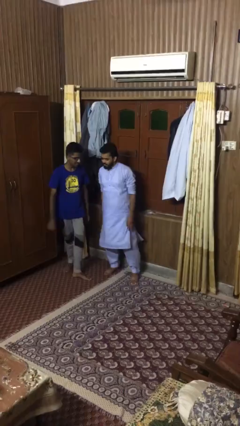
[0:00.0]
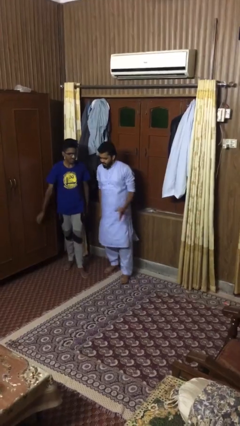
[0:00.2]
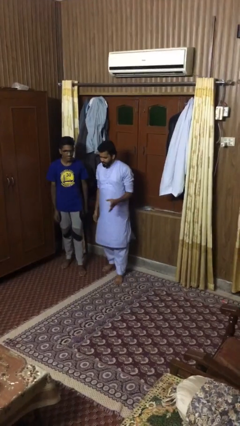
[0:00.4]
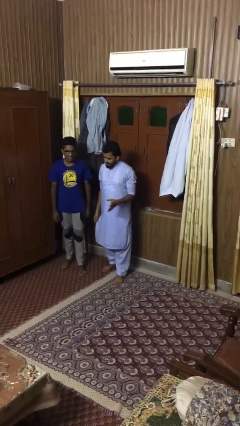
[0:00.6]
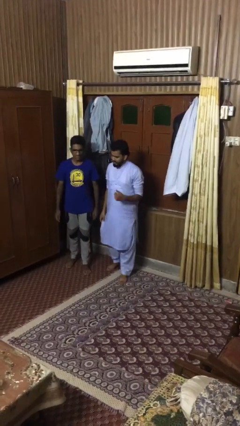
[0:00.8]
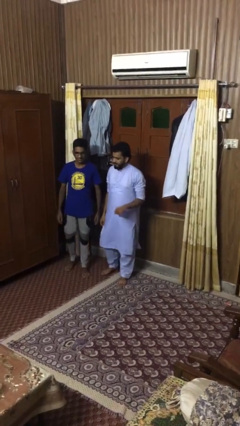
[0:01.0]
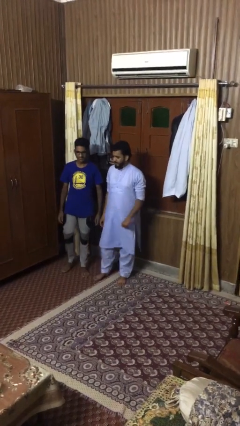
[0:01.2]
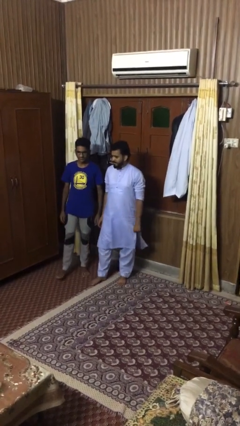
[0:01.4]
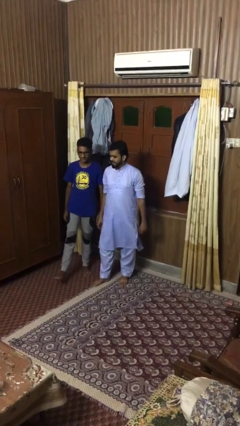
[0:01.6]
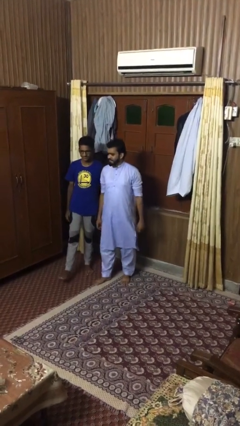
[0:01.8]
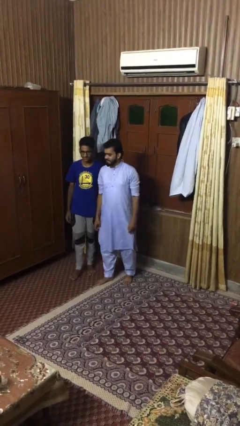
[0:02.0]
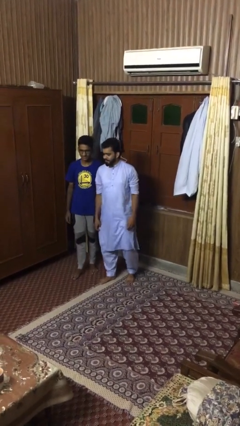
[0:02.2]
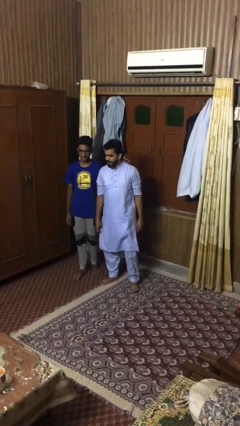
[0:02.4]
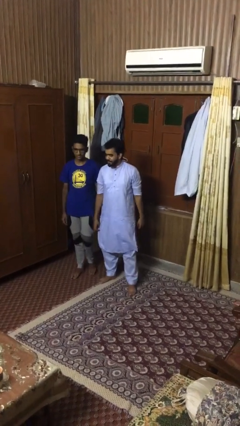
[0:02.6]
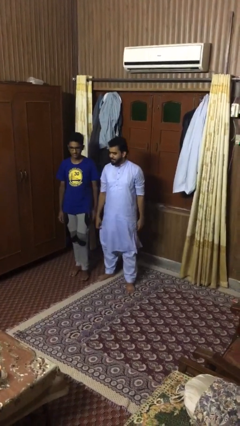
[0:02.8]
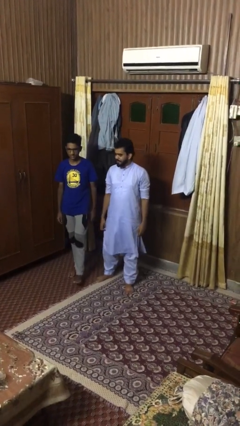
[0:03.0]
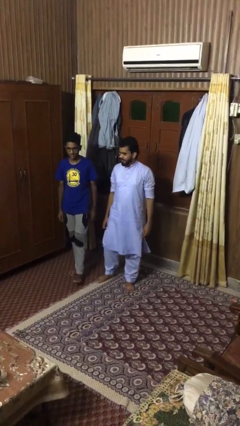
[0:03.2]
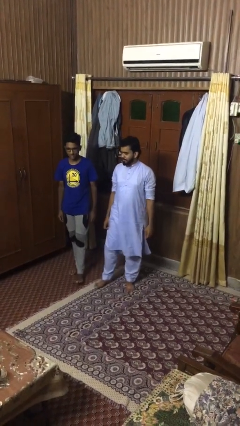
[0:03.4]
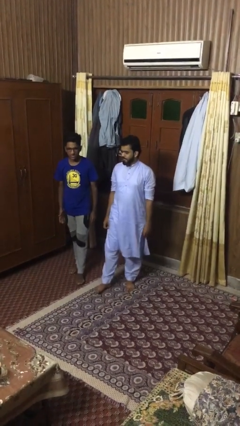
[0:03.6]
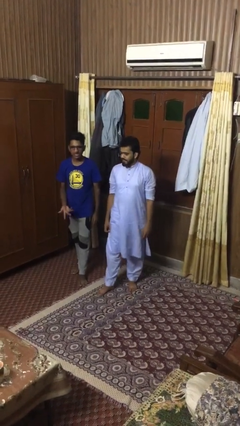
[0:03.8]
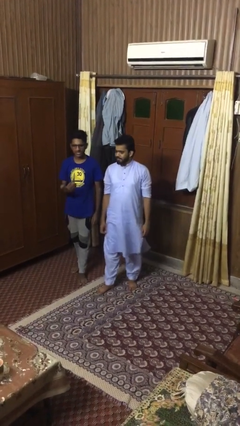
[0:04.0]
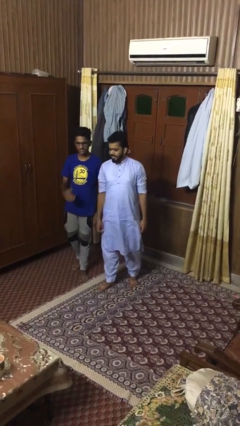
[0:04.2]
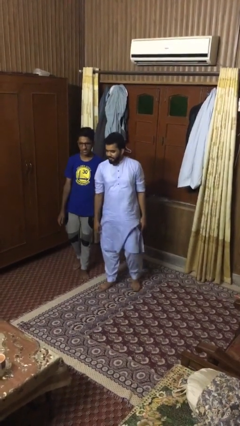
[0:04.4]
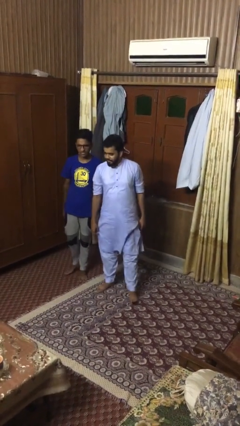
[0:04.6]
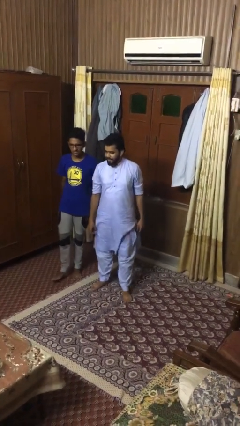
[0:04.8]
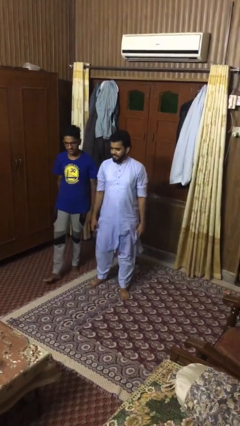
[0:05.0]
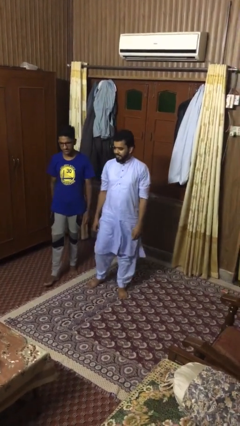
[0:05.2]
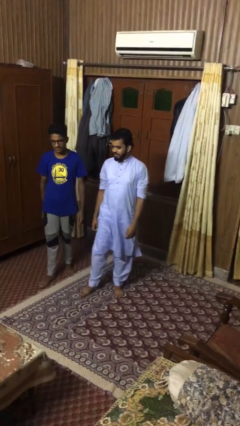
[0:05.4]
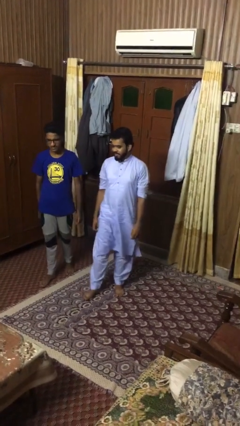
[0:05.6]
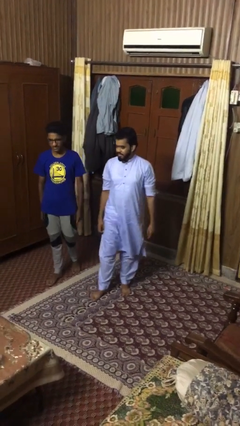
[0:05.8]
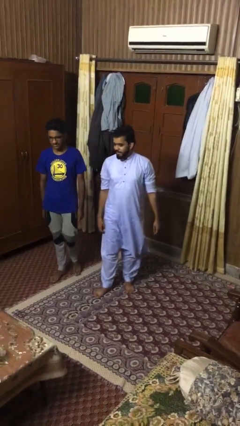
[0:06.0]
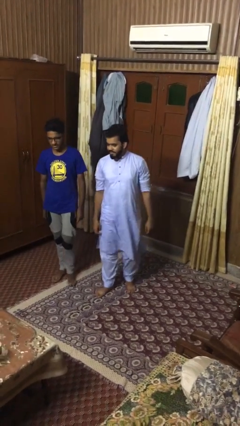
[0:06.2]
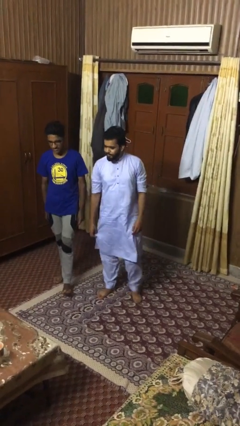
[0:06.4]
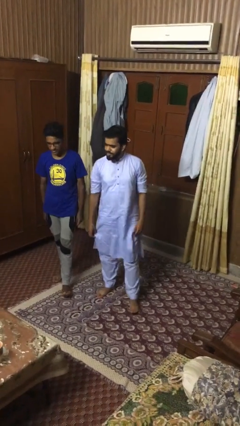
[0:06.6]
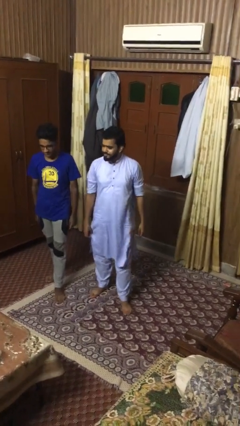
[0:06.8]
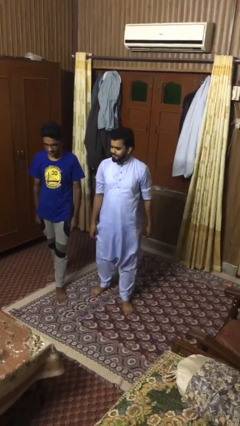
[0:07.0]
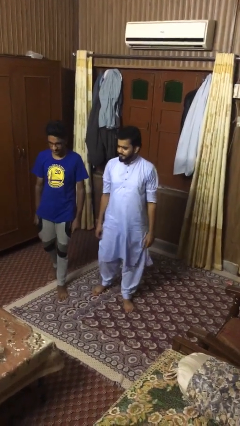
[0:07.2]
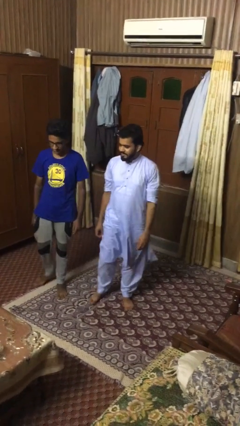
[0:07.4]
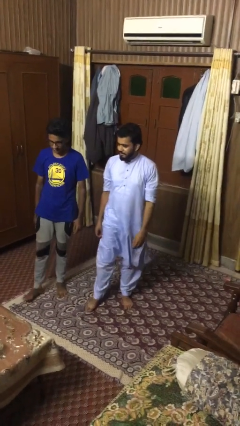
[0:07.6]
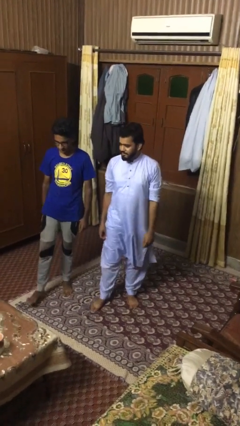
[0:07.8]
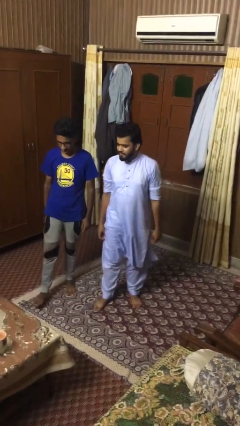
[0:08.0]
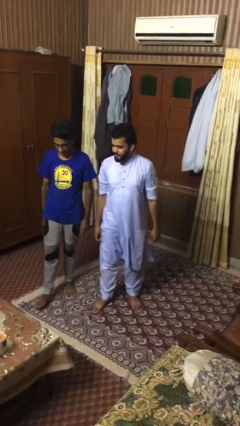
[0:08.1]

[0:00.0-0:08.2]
person talks to person

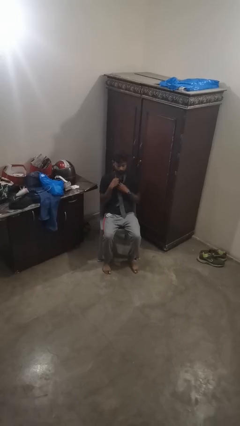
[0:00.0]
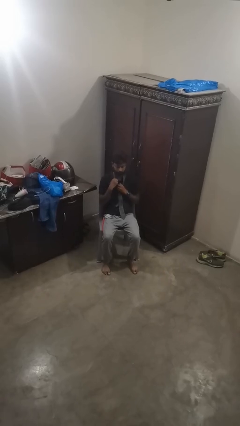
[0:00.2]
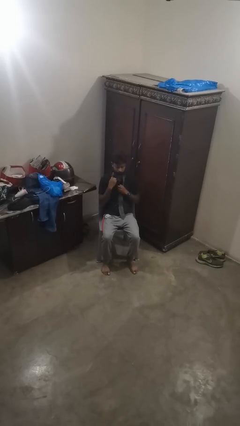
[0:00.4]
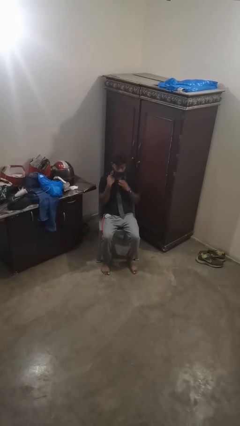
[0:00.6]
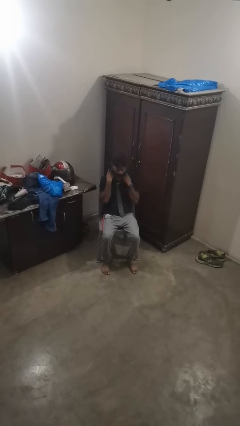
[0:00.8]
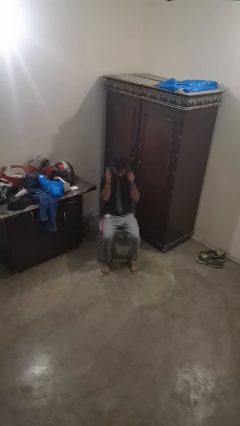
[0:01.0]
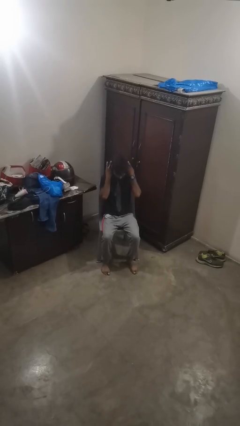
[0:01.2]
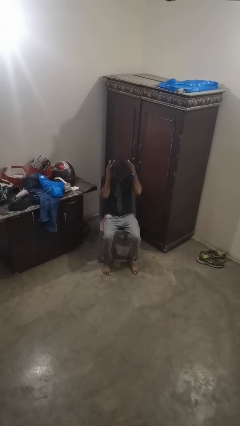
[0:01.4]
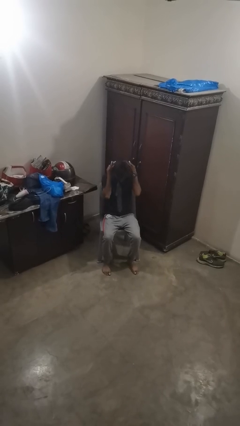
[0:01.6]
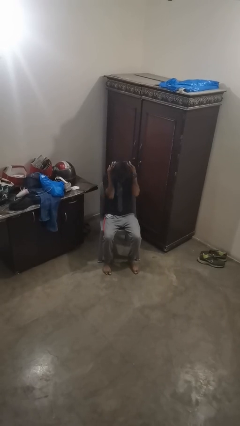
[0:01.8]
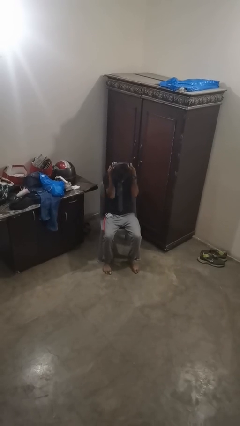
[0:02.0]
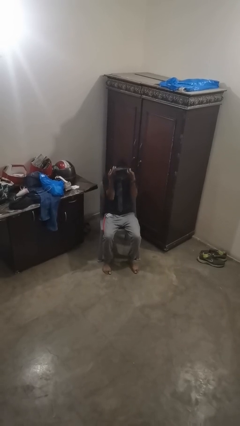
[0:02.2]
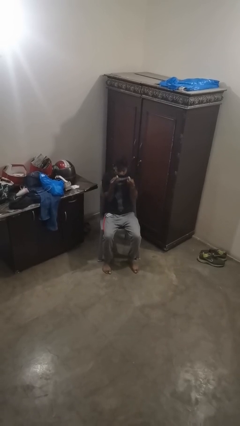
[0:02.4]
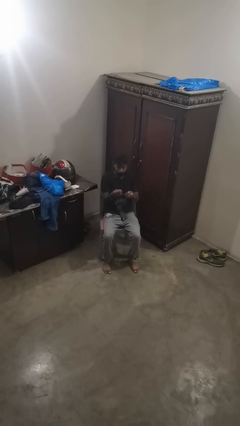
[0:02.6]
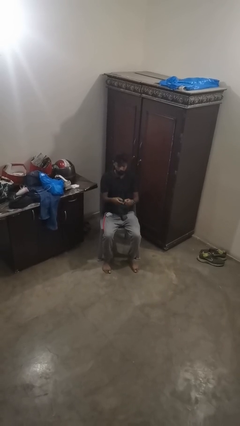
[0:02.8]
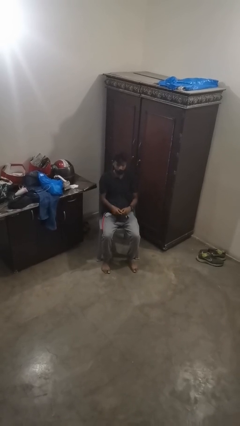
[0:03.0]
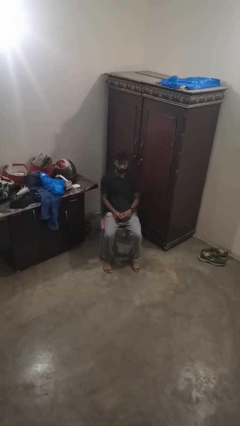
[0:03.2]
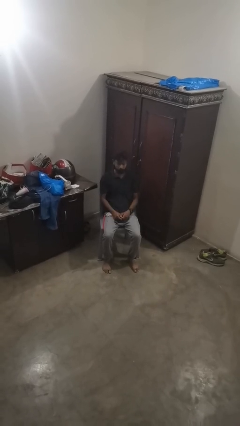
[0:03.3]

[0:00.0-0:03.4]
person takes off necktie

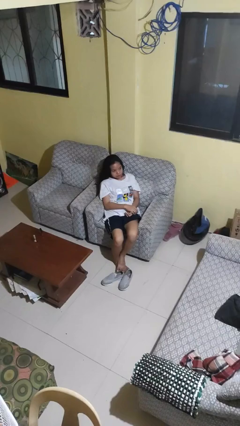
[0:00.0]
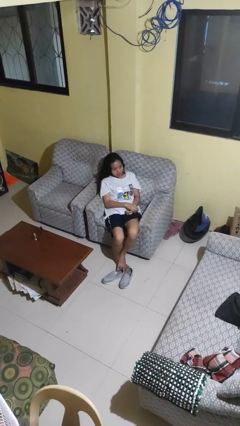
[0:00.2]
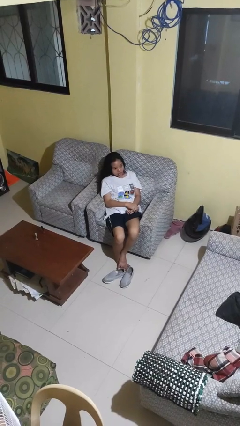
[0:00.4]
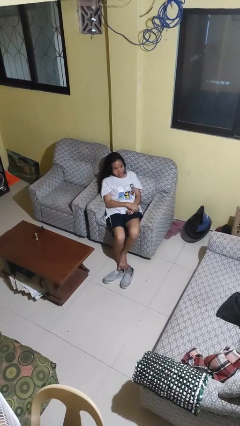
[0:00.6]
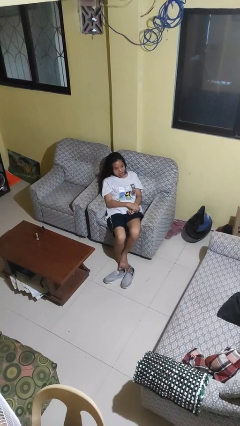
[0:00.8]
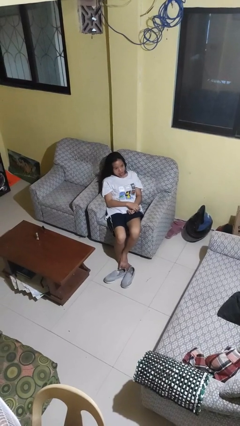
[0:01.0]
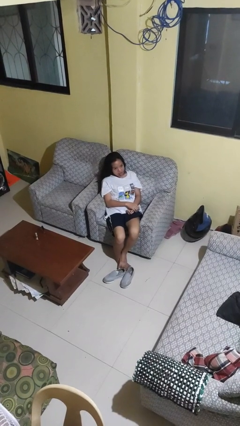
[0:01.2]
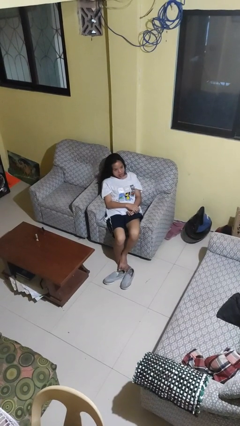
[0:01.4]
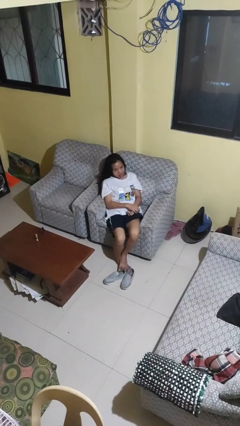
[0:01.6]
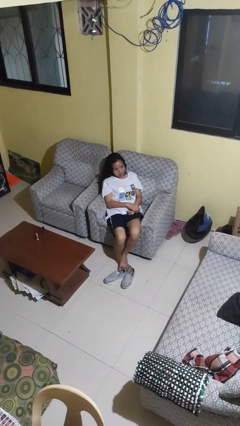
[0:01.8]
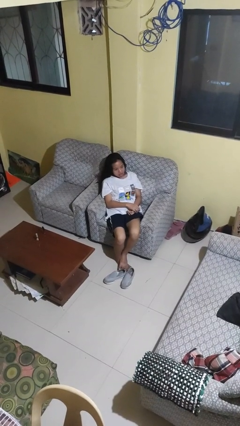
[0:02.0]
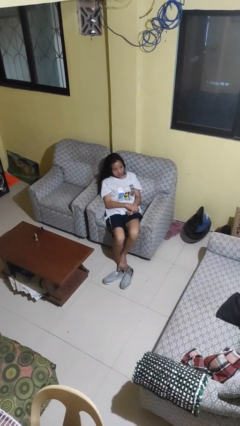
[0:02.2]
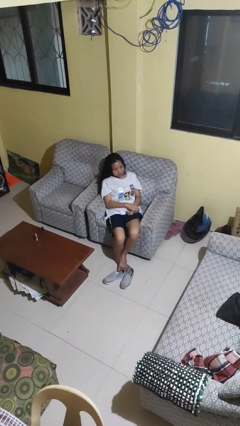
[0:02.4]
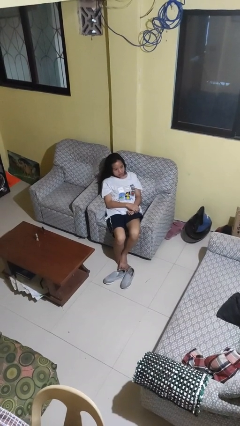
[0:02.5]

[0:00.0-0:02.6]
person sticks out tongue

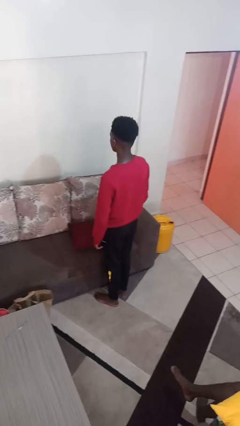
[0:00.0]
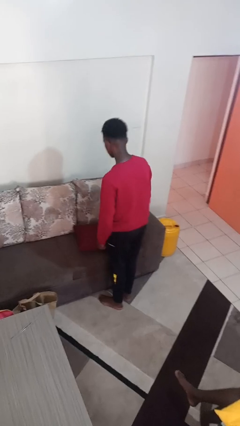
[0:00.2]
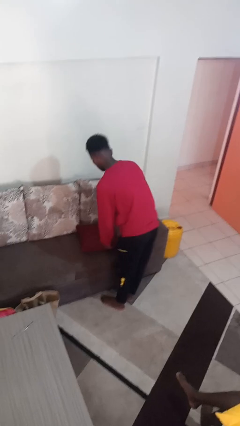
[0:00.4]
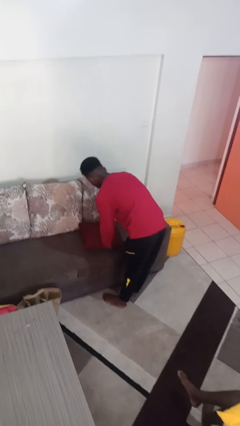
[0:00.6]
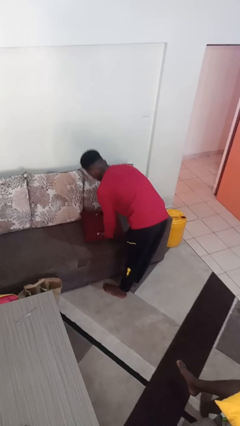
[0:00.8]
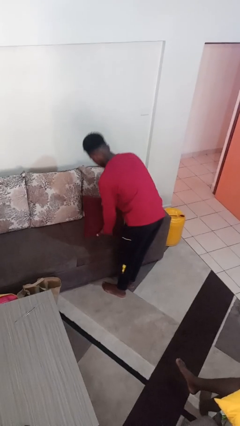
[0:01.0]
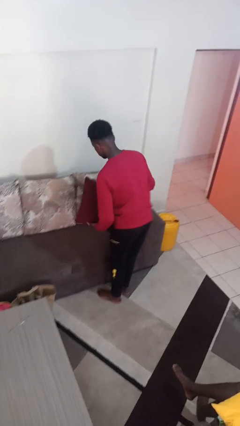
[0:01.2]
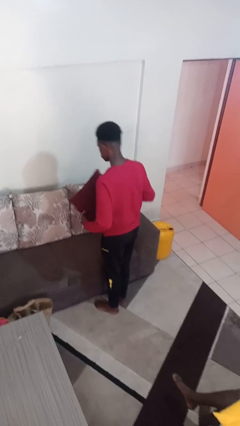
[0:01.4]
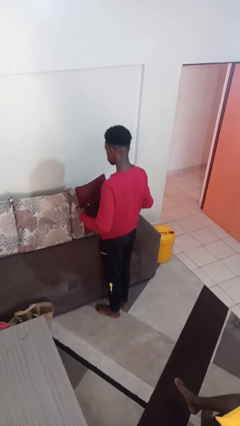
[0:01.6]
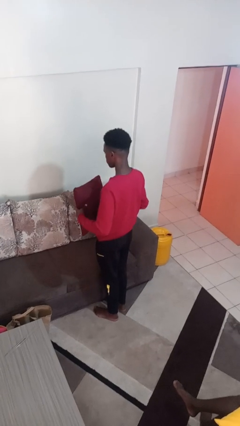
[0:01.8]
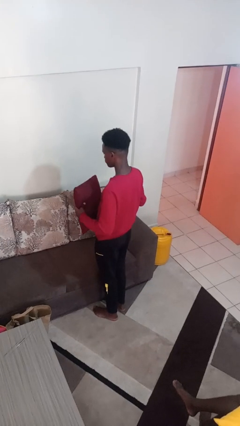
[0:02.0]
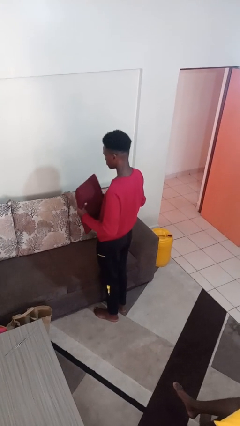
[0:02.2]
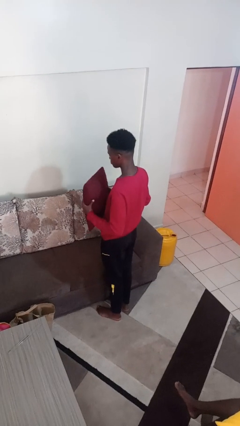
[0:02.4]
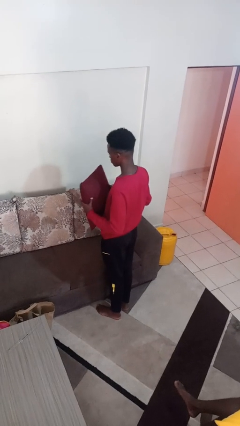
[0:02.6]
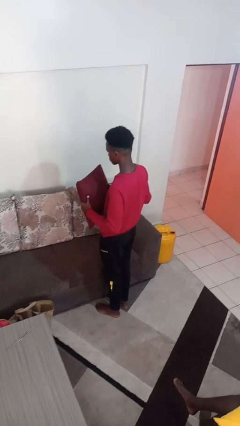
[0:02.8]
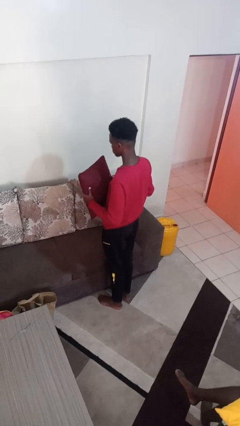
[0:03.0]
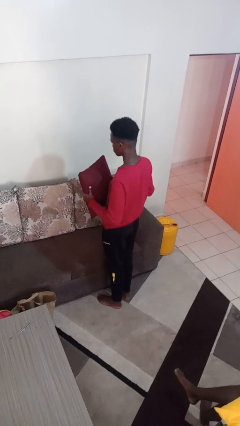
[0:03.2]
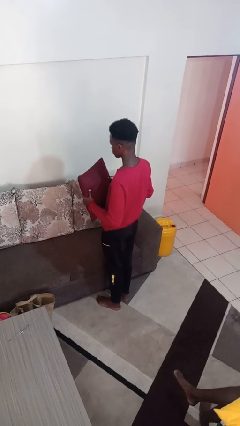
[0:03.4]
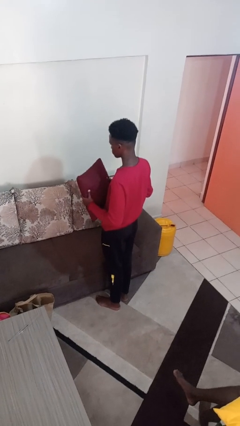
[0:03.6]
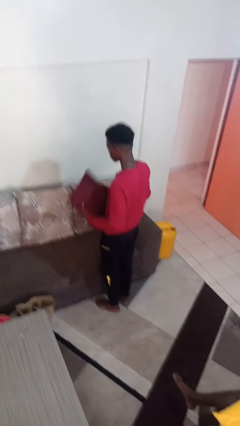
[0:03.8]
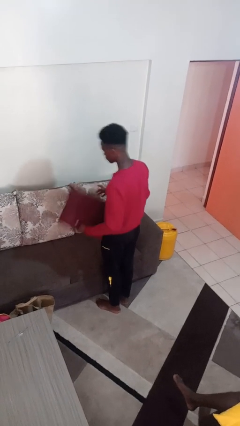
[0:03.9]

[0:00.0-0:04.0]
person picks up object from couch
